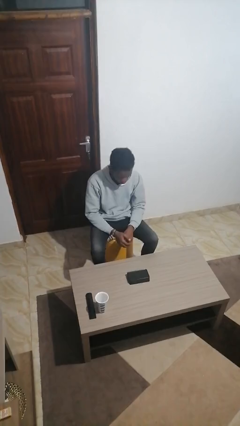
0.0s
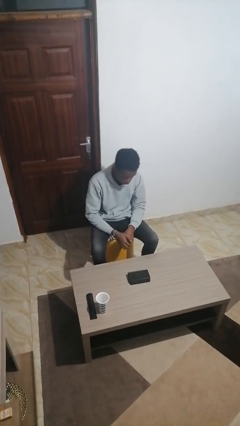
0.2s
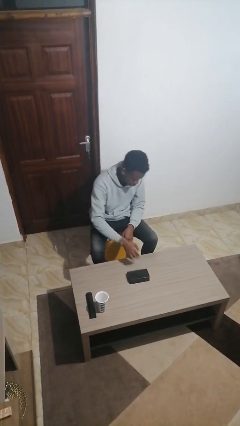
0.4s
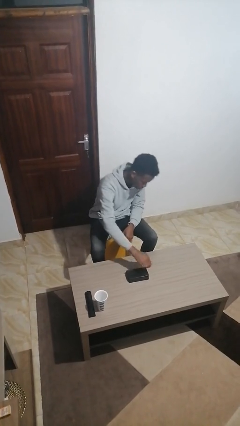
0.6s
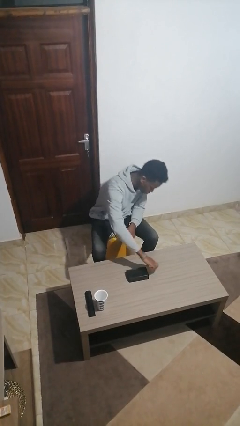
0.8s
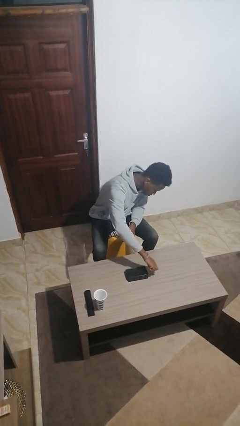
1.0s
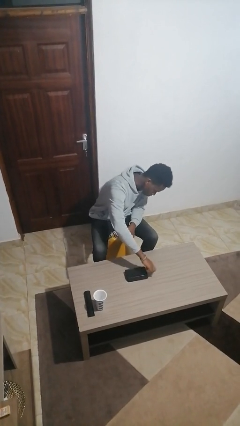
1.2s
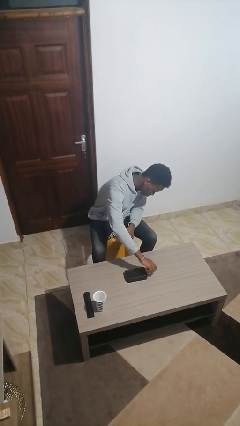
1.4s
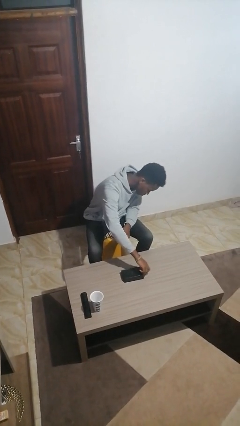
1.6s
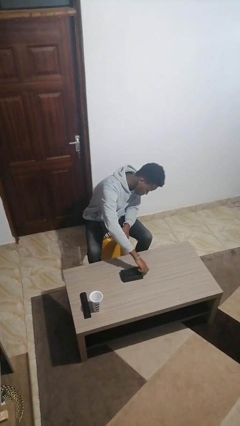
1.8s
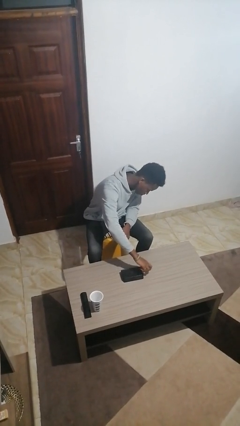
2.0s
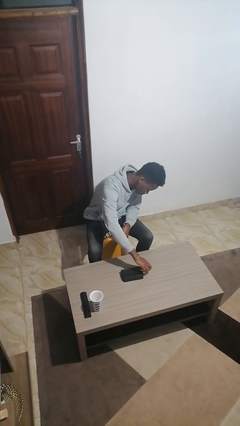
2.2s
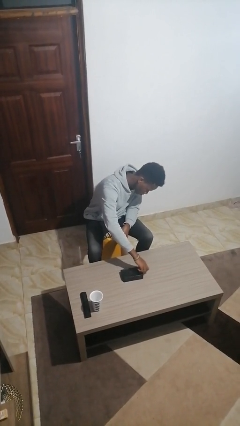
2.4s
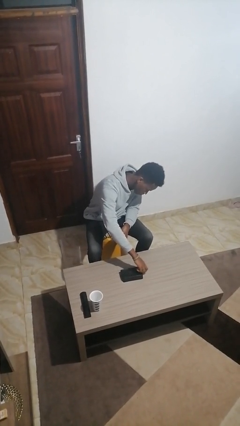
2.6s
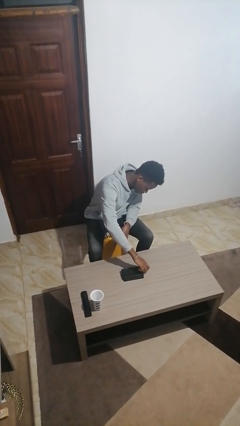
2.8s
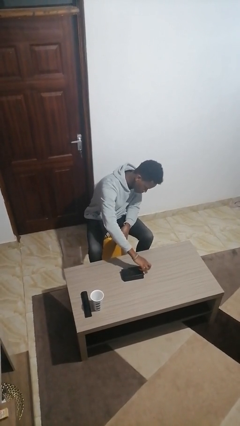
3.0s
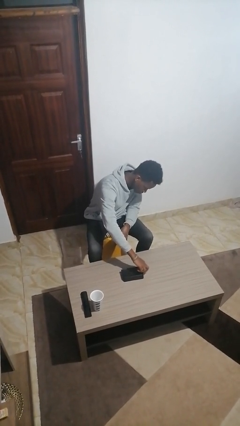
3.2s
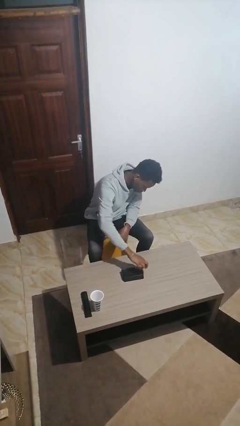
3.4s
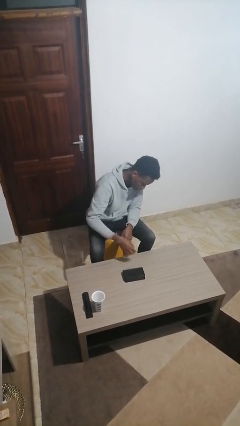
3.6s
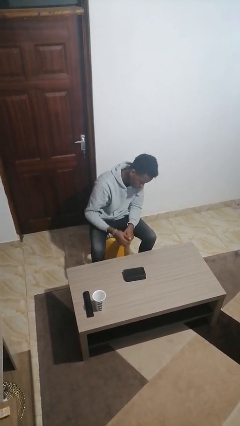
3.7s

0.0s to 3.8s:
person taps object with finger

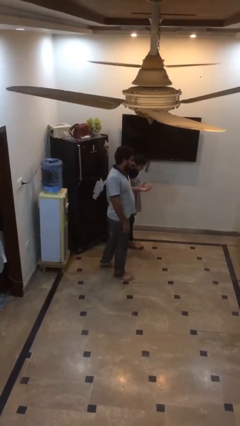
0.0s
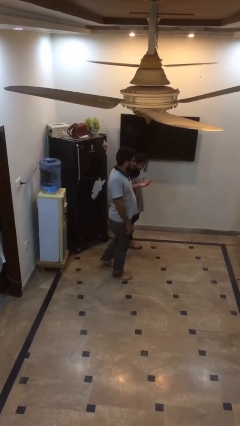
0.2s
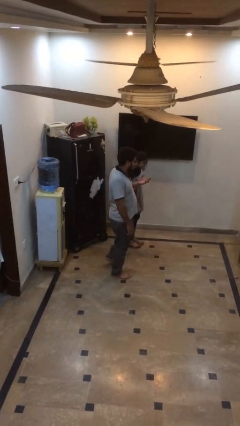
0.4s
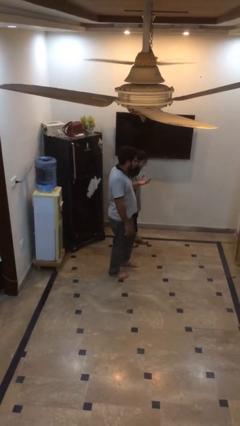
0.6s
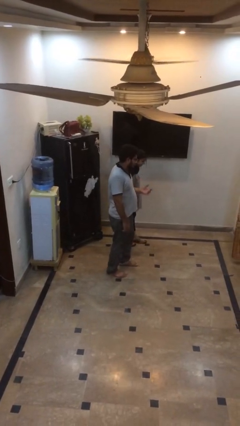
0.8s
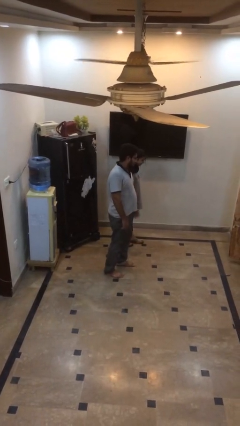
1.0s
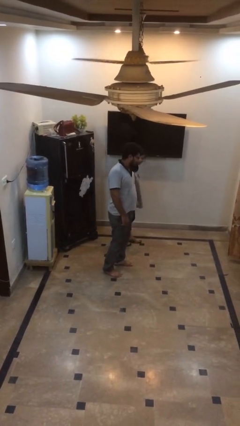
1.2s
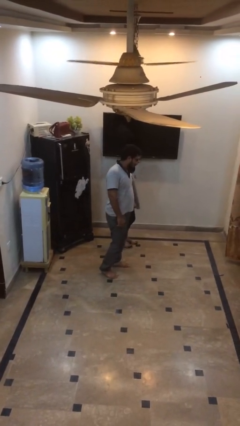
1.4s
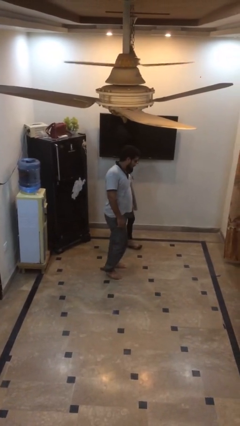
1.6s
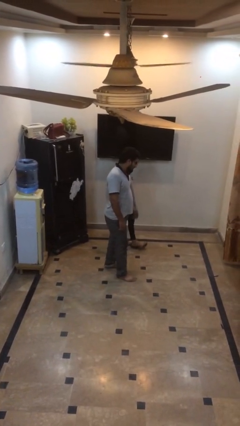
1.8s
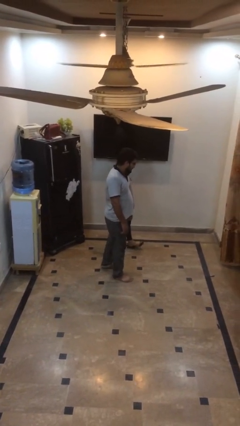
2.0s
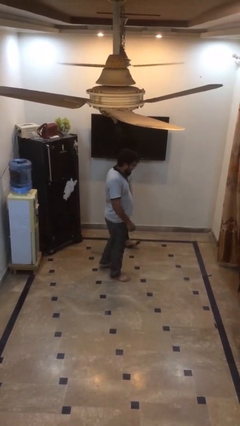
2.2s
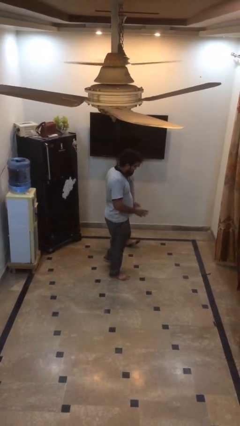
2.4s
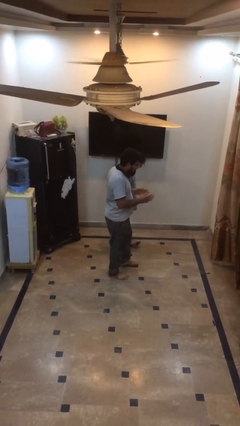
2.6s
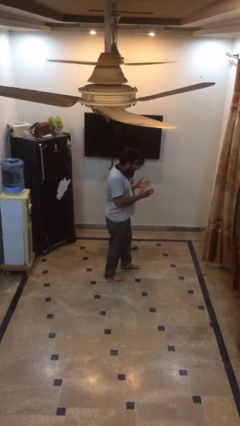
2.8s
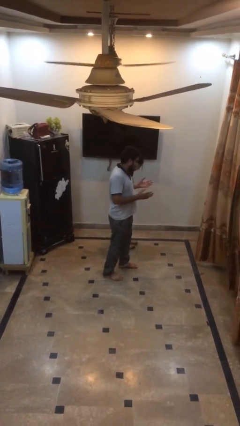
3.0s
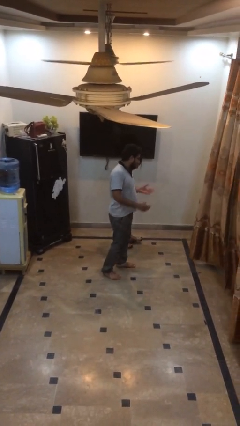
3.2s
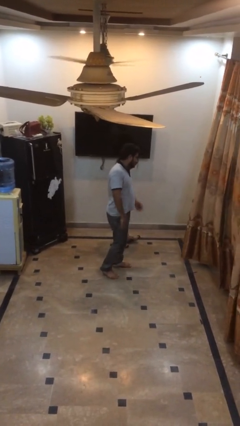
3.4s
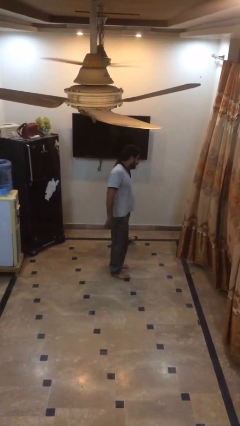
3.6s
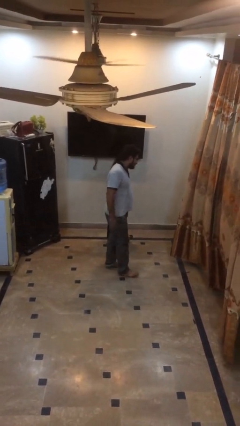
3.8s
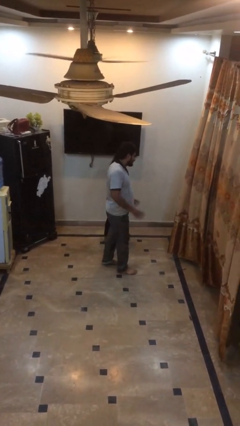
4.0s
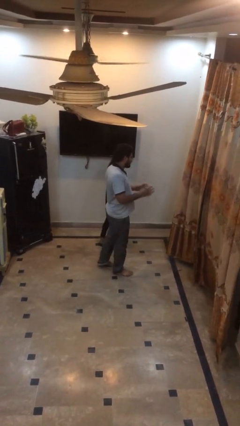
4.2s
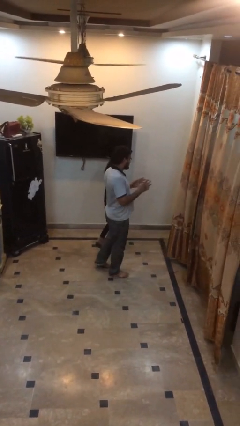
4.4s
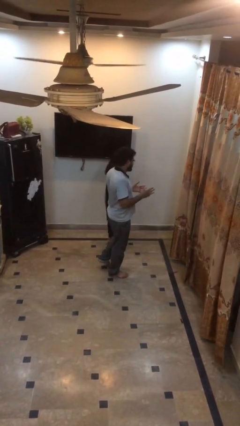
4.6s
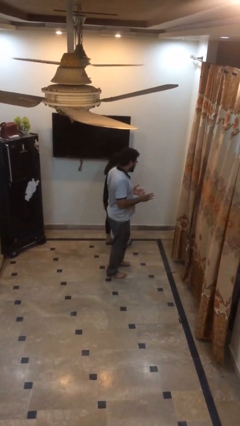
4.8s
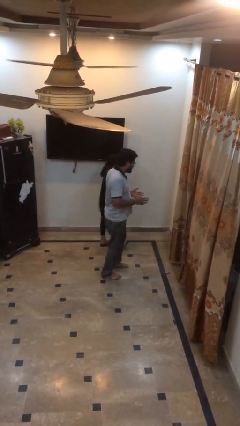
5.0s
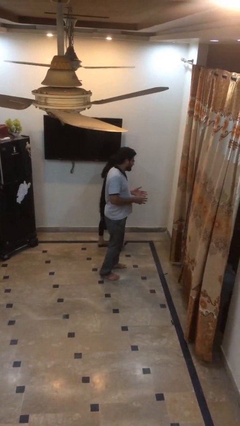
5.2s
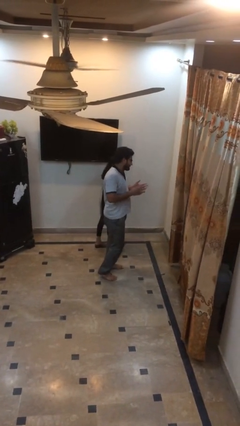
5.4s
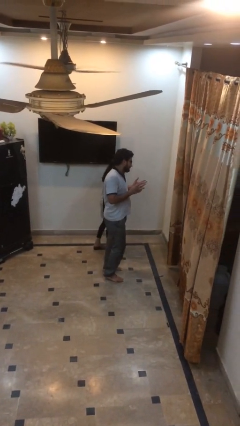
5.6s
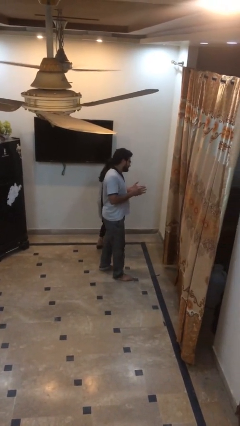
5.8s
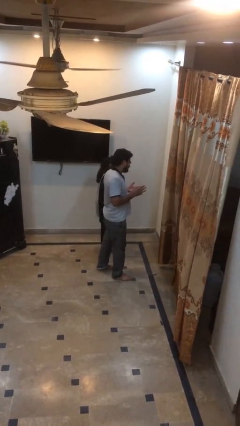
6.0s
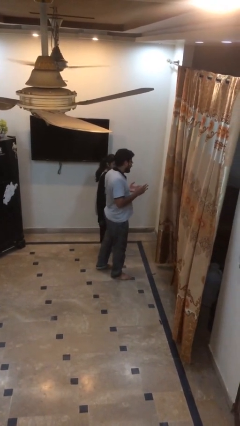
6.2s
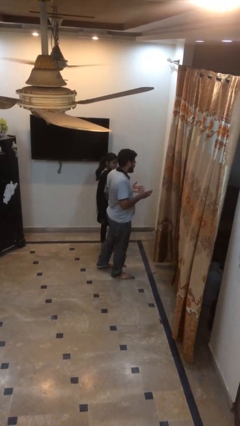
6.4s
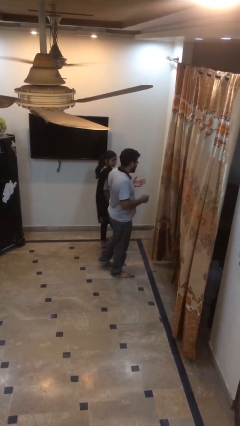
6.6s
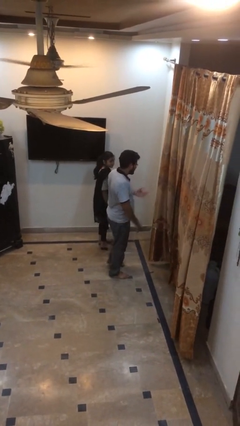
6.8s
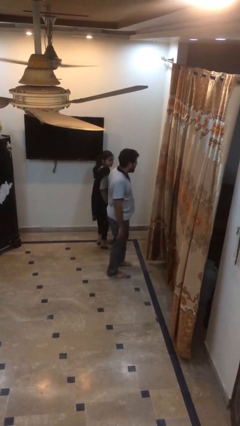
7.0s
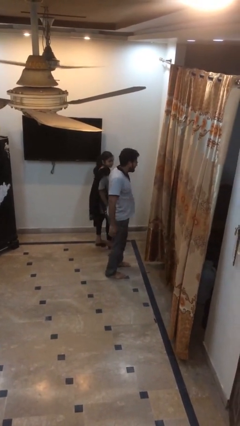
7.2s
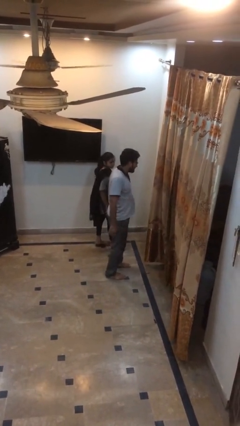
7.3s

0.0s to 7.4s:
person talks to person

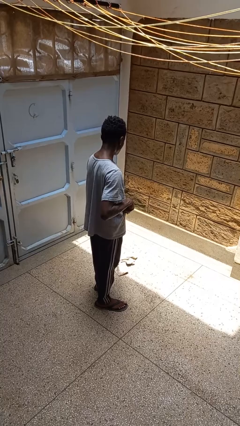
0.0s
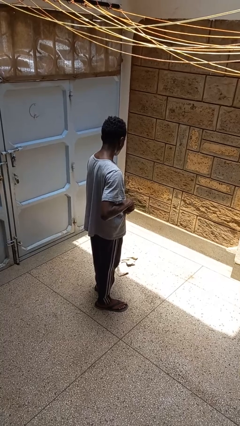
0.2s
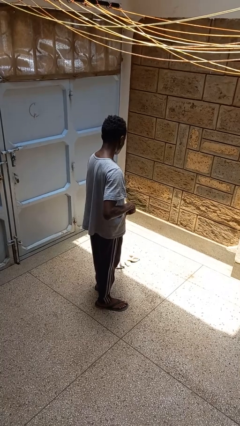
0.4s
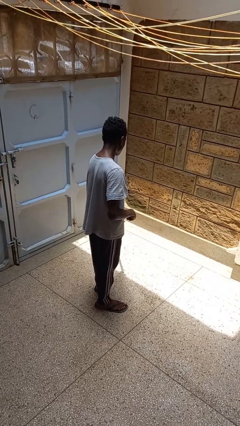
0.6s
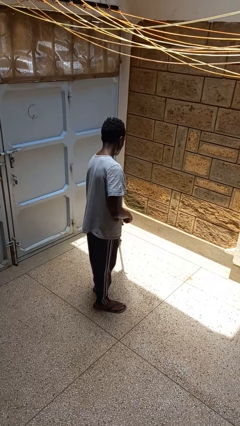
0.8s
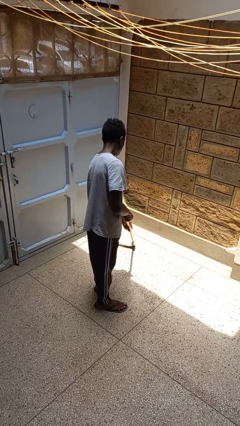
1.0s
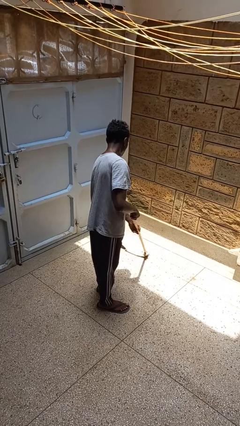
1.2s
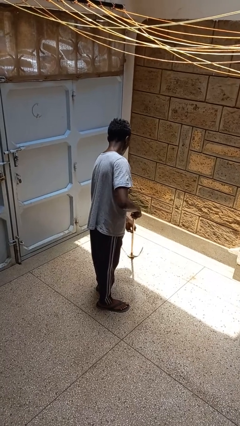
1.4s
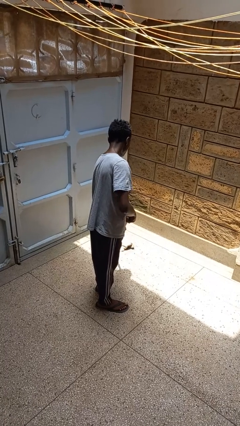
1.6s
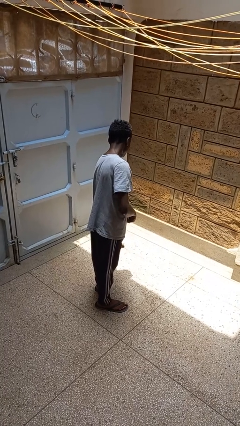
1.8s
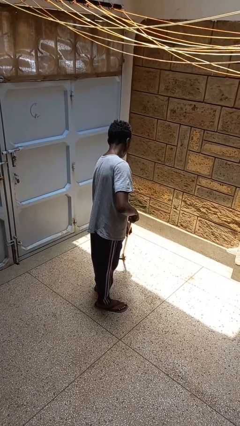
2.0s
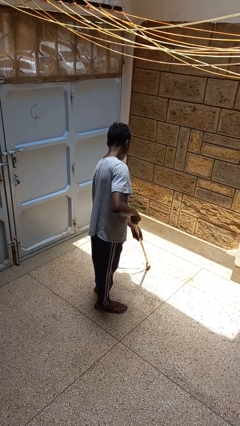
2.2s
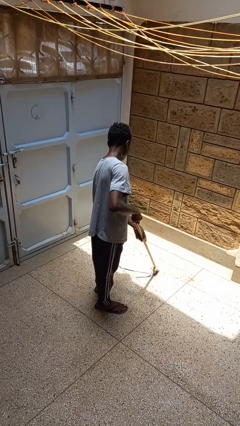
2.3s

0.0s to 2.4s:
person mops

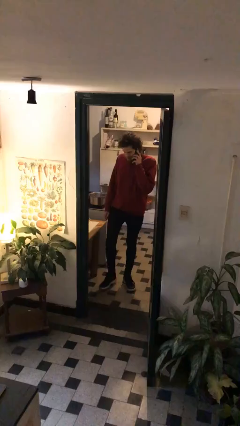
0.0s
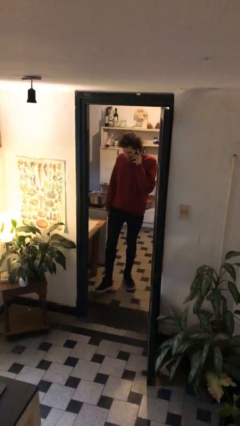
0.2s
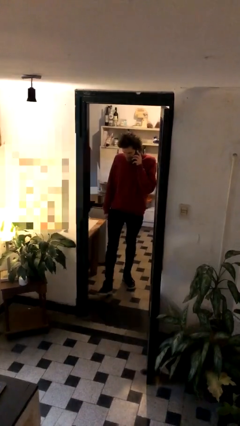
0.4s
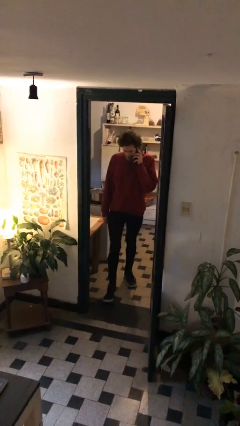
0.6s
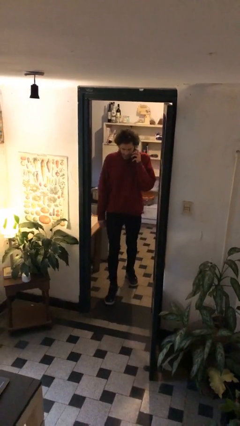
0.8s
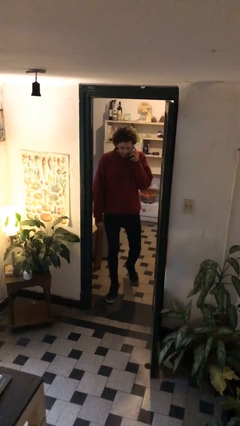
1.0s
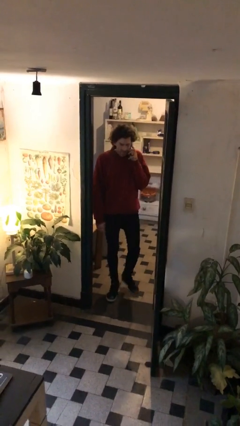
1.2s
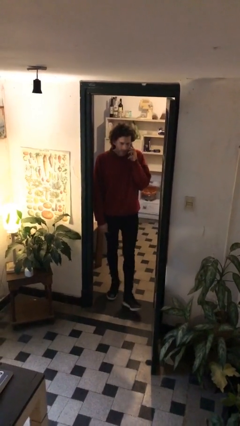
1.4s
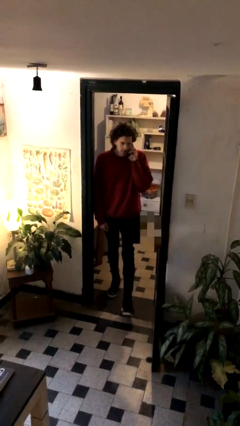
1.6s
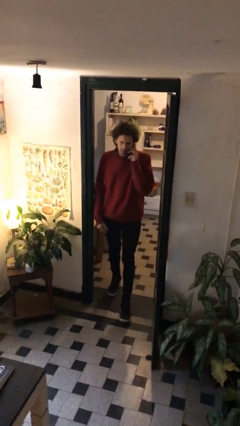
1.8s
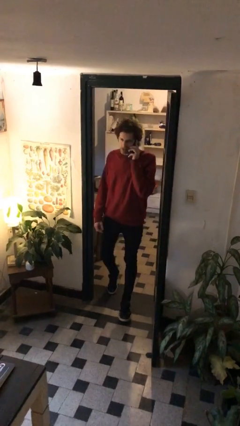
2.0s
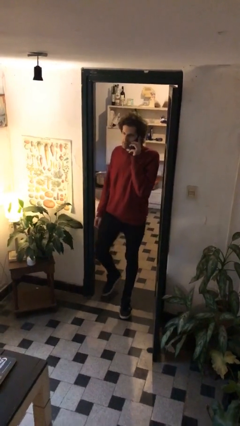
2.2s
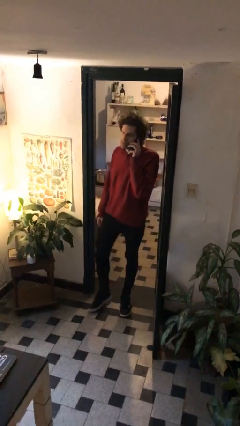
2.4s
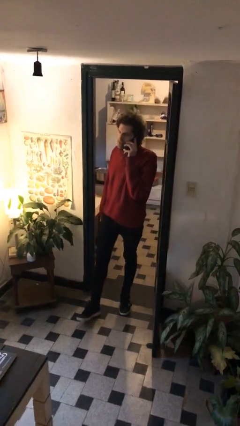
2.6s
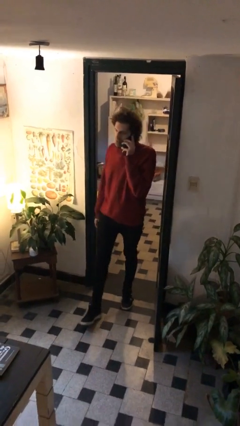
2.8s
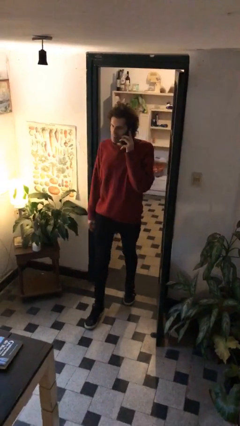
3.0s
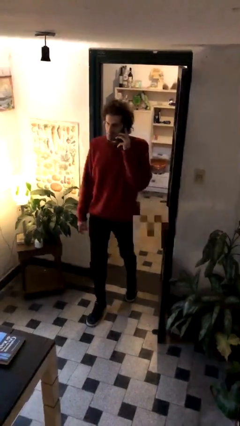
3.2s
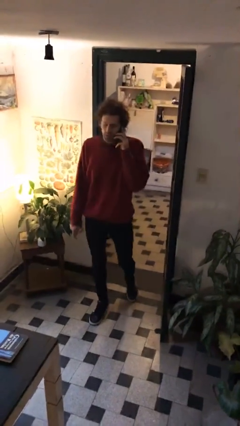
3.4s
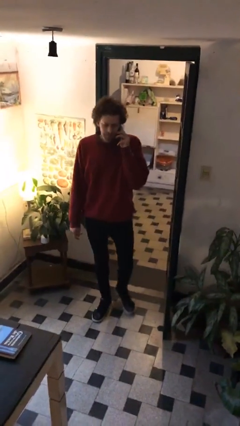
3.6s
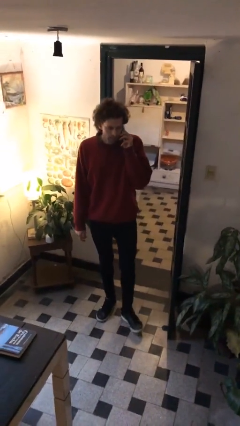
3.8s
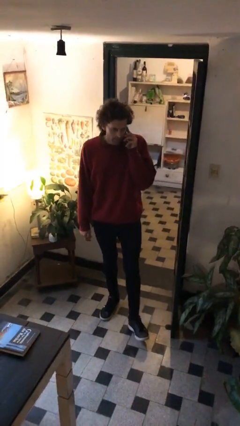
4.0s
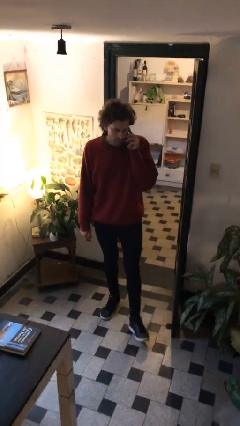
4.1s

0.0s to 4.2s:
person enters scene through structure
